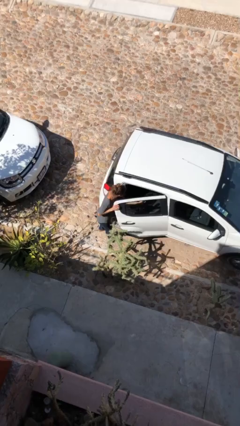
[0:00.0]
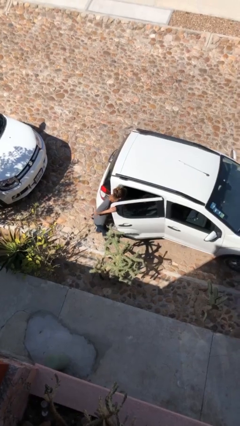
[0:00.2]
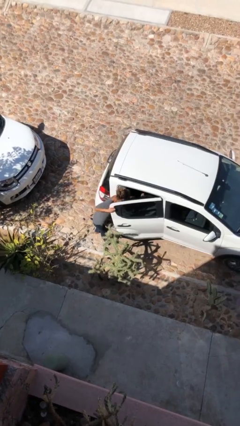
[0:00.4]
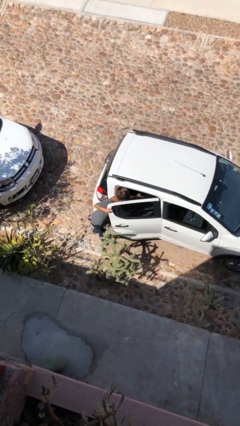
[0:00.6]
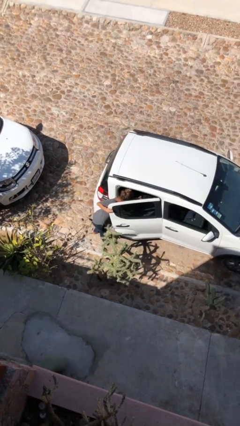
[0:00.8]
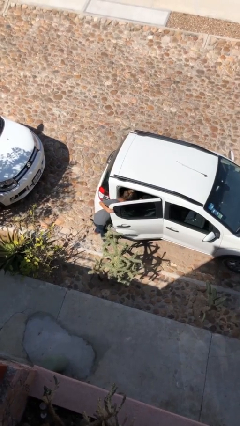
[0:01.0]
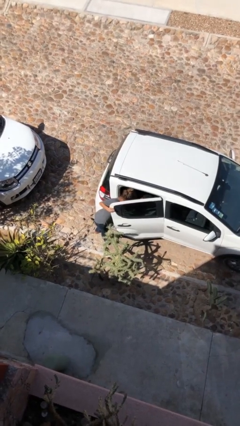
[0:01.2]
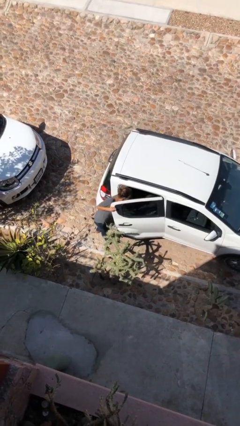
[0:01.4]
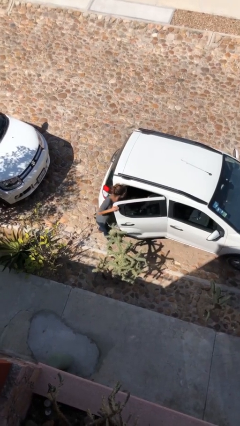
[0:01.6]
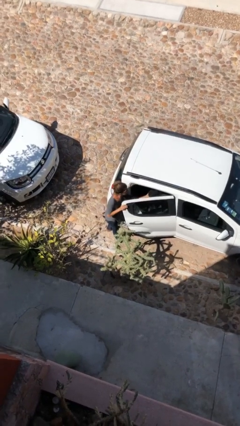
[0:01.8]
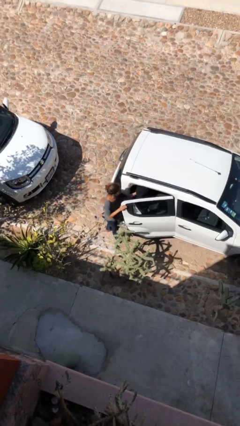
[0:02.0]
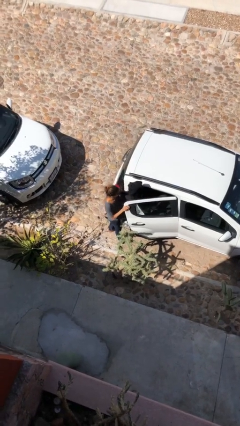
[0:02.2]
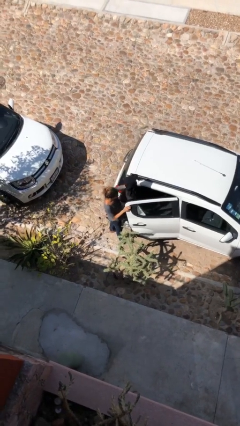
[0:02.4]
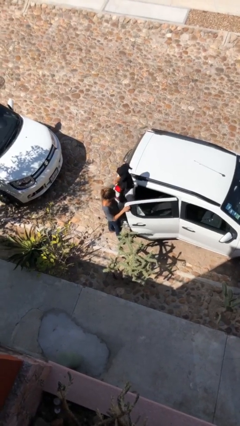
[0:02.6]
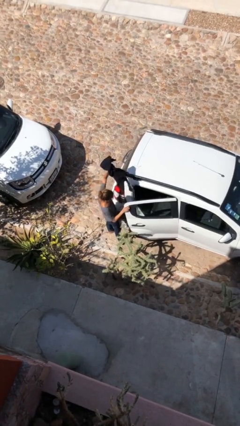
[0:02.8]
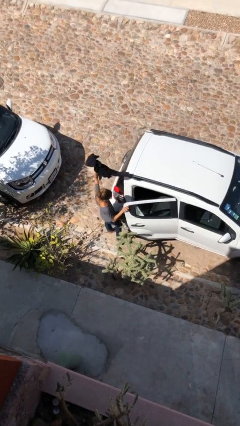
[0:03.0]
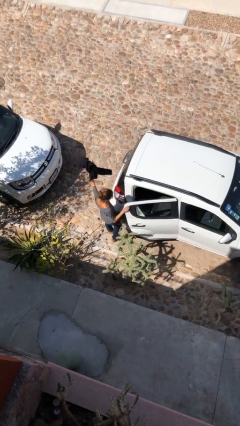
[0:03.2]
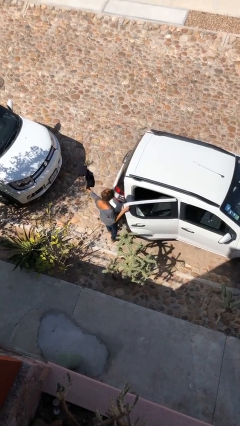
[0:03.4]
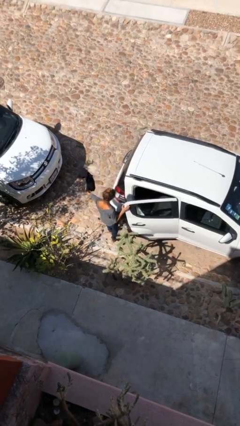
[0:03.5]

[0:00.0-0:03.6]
person unloads car

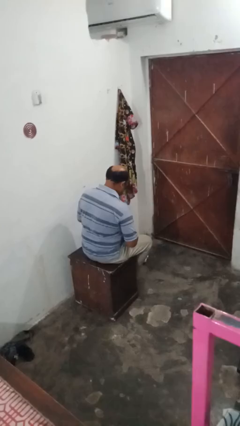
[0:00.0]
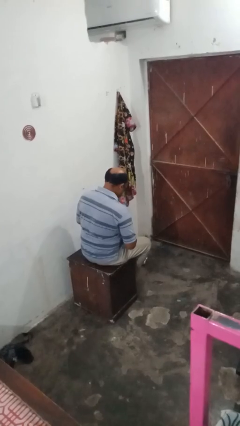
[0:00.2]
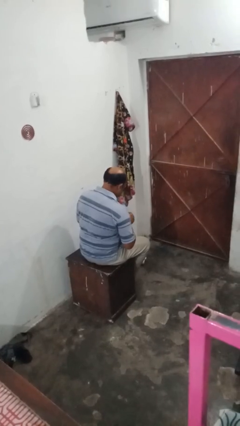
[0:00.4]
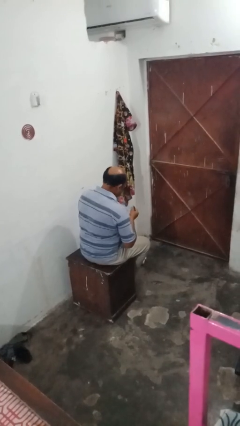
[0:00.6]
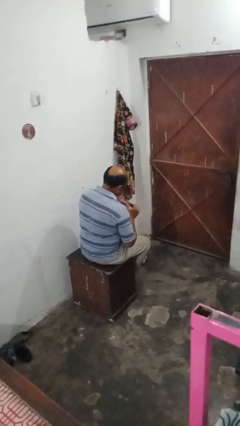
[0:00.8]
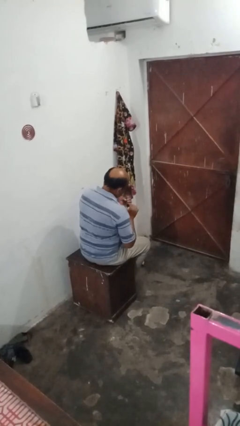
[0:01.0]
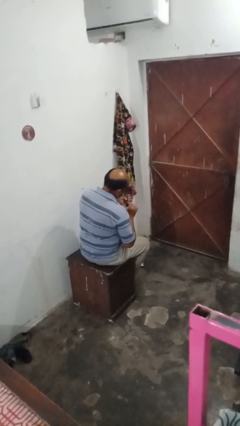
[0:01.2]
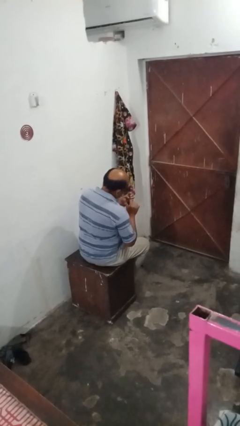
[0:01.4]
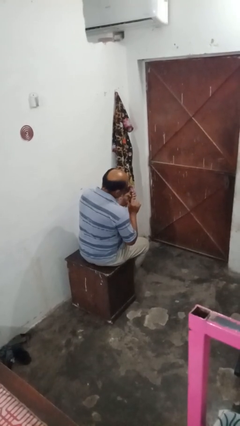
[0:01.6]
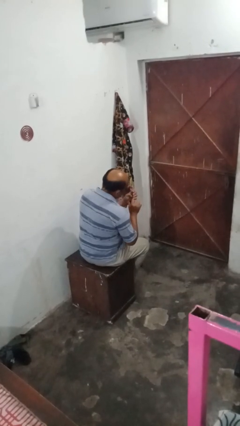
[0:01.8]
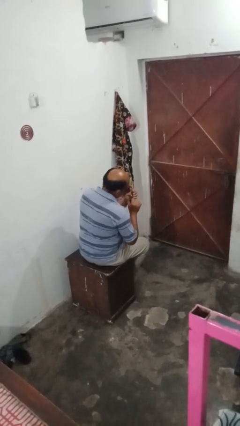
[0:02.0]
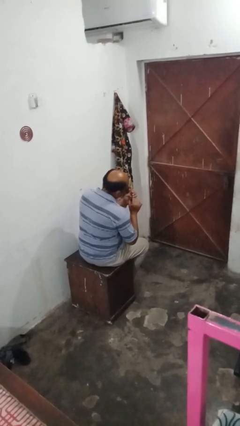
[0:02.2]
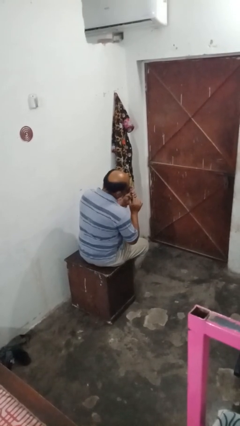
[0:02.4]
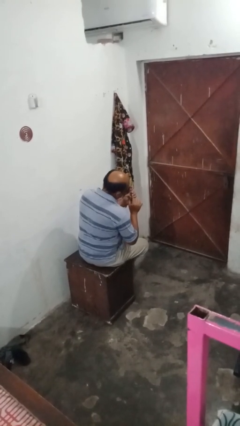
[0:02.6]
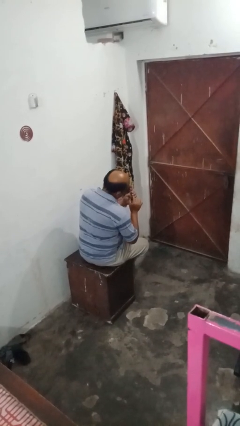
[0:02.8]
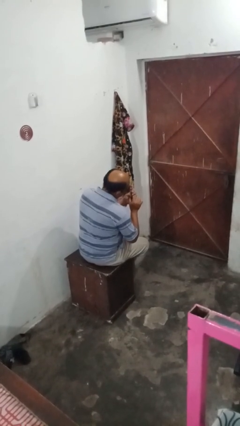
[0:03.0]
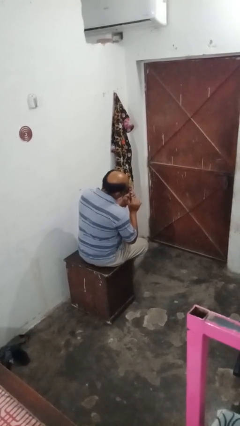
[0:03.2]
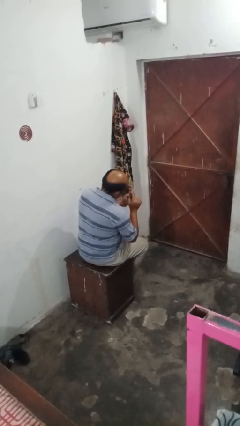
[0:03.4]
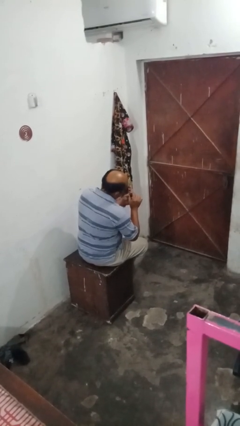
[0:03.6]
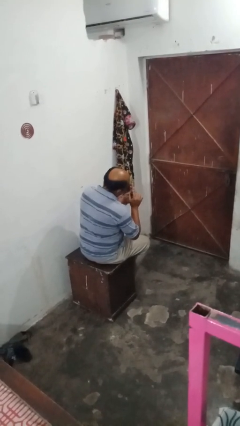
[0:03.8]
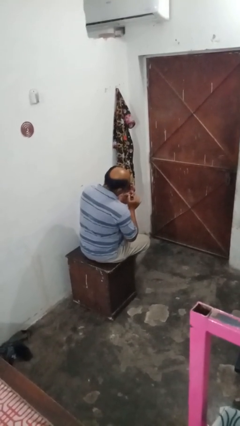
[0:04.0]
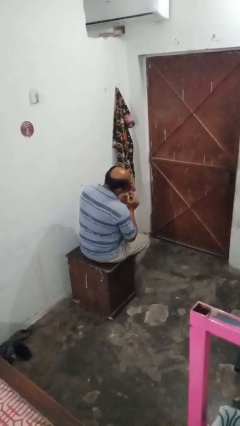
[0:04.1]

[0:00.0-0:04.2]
person paints fingernails

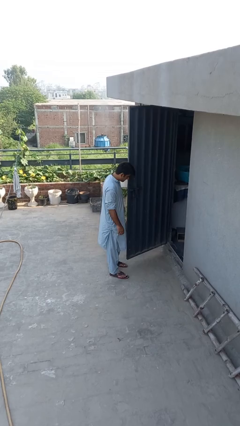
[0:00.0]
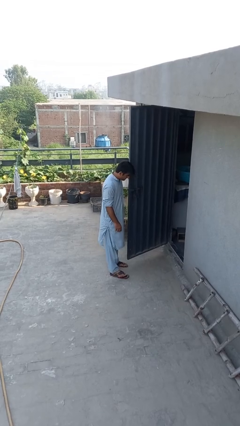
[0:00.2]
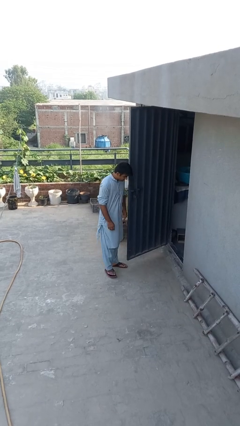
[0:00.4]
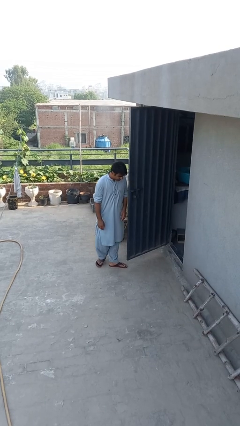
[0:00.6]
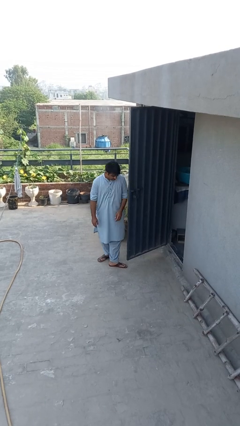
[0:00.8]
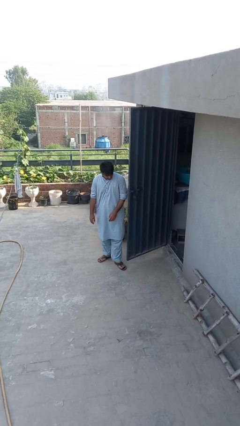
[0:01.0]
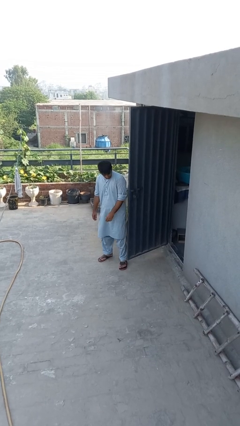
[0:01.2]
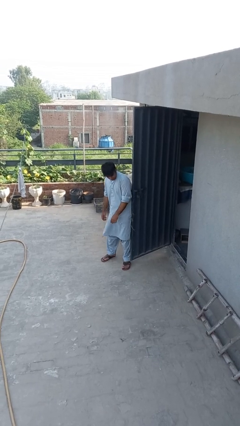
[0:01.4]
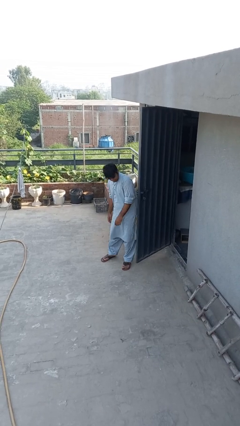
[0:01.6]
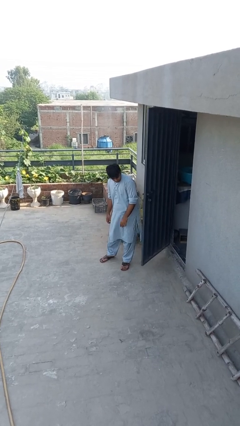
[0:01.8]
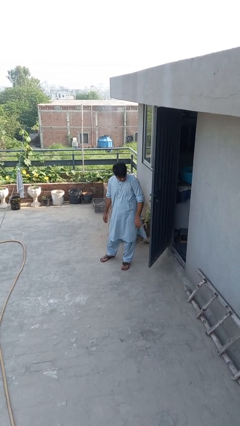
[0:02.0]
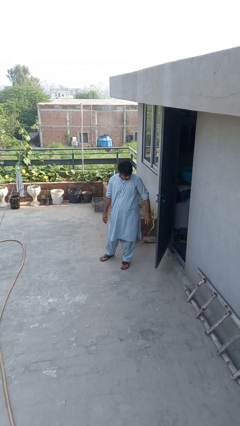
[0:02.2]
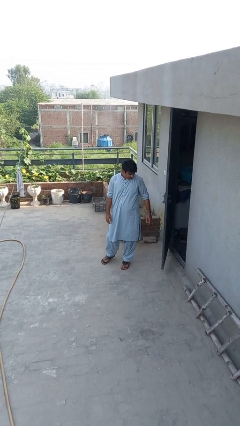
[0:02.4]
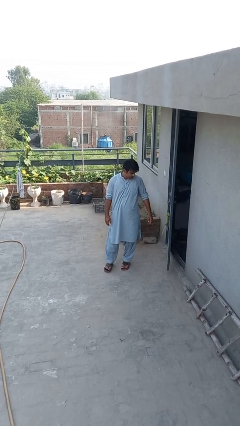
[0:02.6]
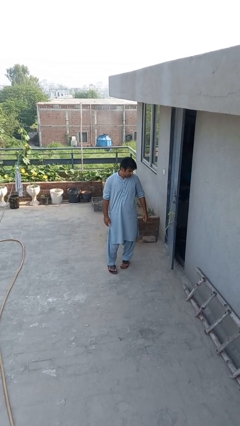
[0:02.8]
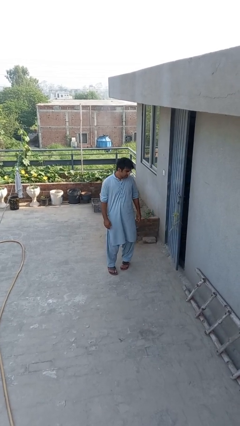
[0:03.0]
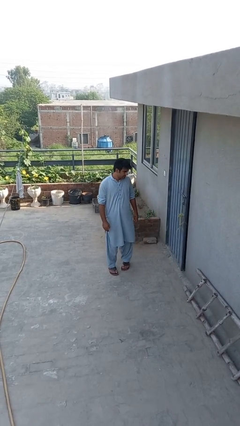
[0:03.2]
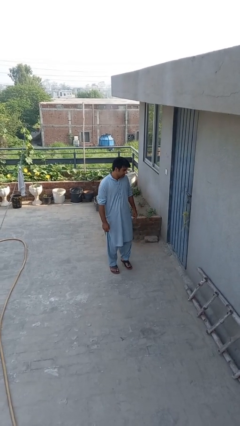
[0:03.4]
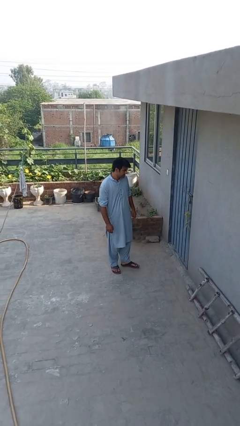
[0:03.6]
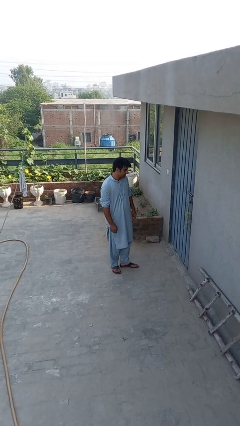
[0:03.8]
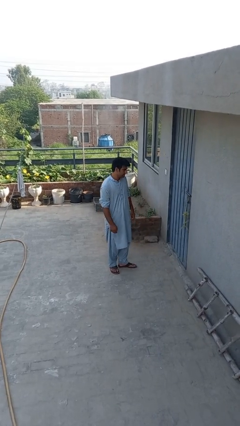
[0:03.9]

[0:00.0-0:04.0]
person closes door with hip

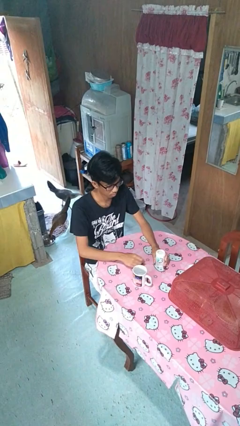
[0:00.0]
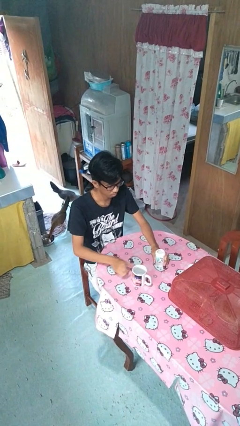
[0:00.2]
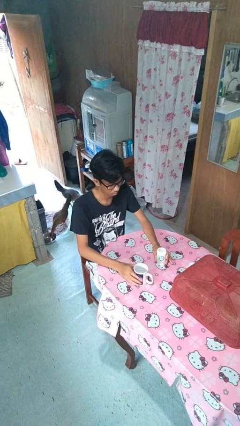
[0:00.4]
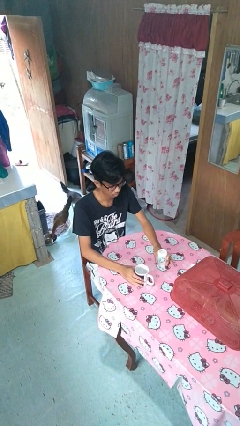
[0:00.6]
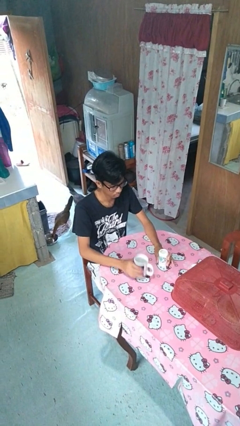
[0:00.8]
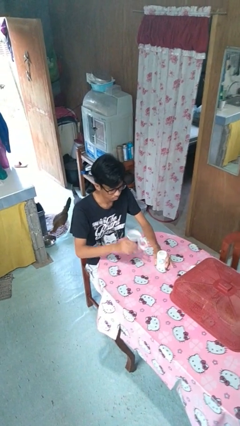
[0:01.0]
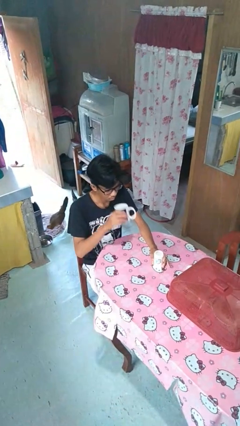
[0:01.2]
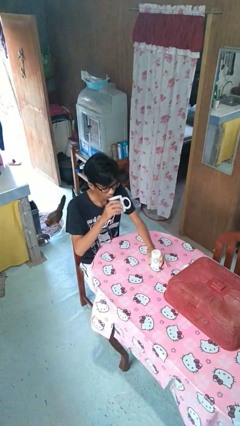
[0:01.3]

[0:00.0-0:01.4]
person drinks from cup

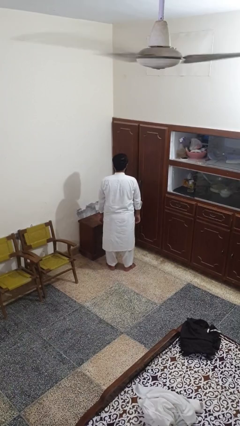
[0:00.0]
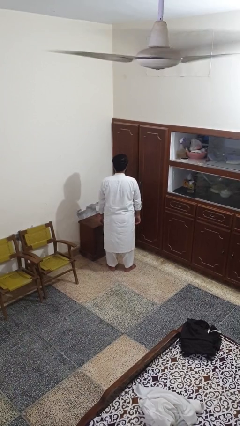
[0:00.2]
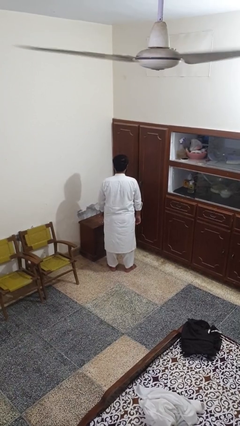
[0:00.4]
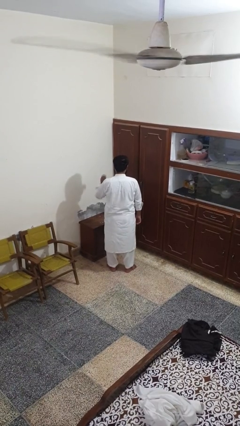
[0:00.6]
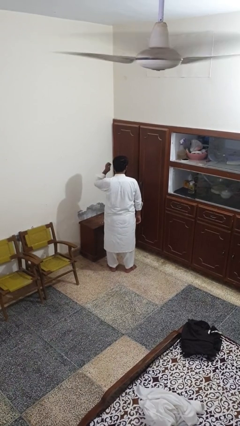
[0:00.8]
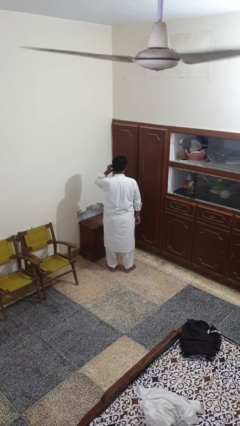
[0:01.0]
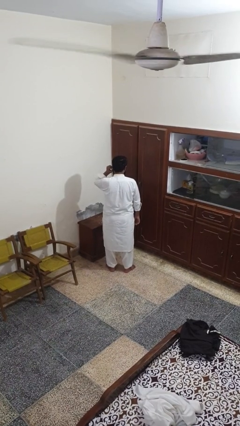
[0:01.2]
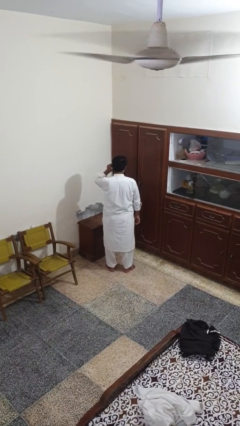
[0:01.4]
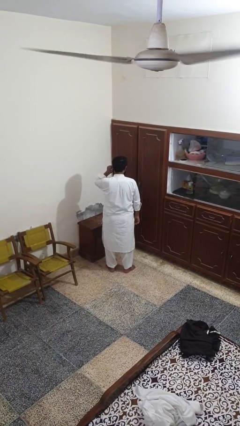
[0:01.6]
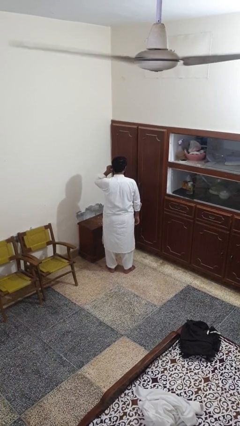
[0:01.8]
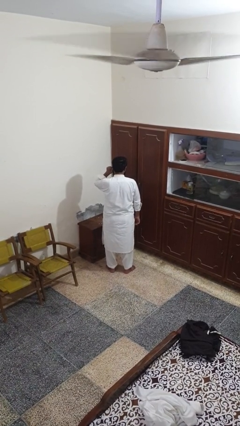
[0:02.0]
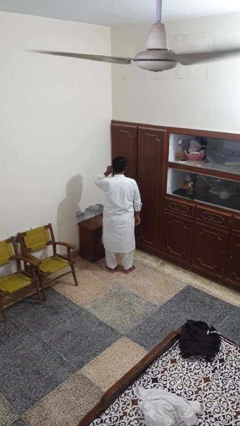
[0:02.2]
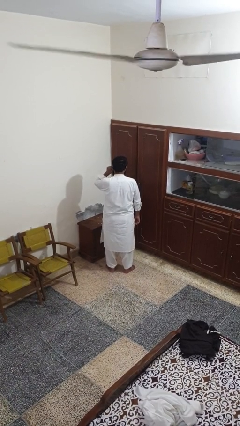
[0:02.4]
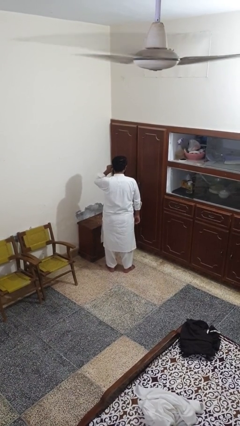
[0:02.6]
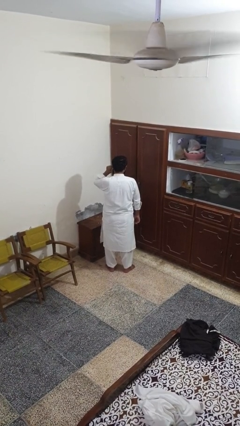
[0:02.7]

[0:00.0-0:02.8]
person touches earlobe

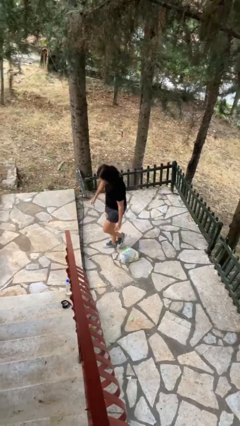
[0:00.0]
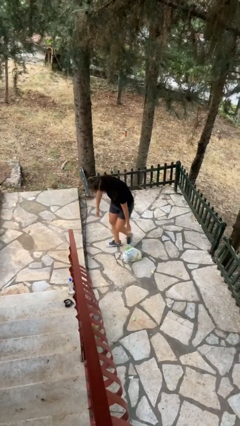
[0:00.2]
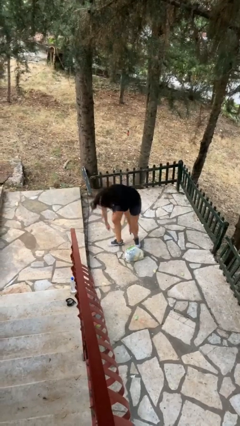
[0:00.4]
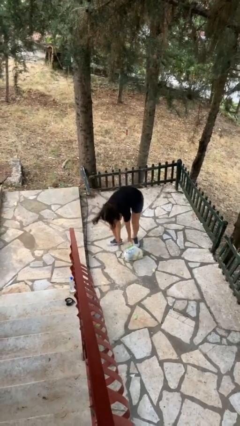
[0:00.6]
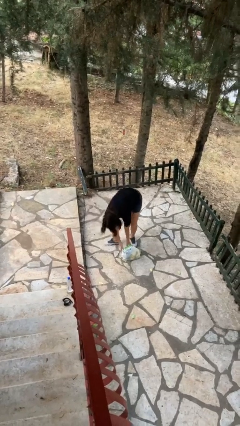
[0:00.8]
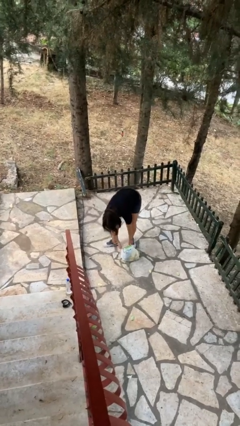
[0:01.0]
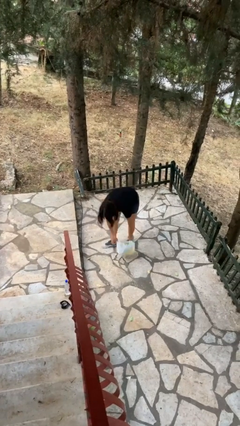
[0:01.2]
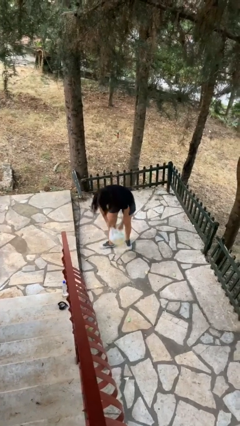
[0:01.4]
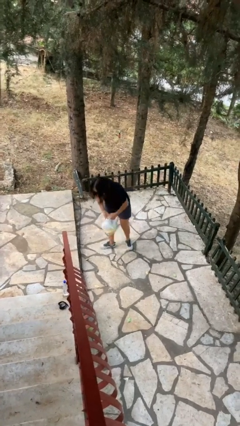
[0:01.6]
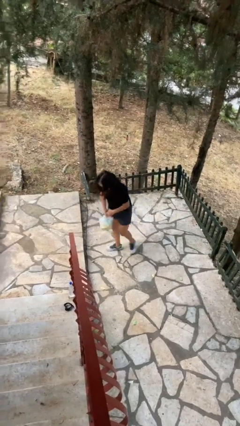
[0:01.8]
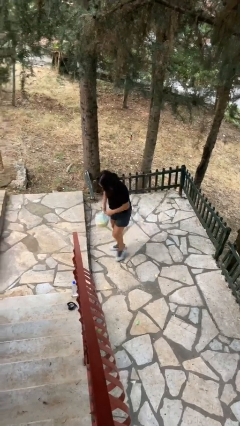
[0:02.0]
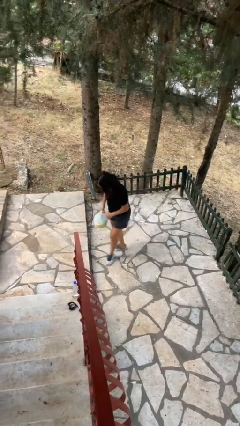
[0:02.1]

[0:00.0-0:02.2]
person picks up object from floor
